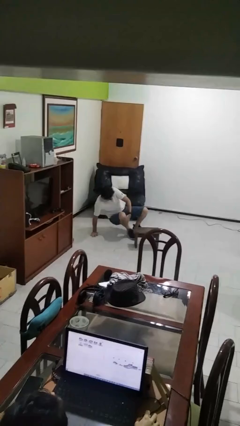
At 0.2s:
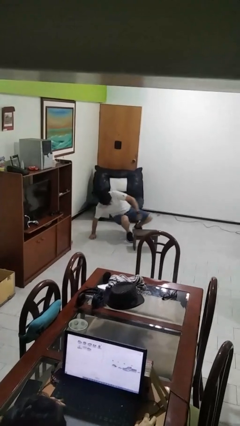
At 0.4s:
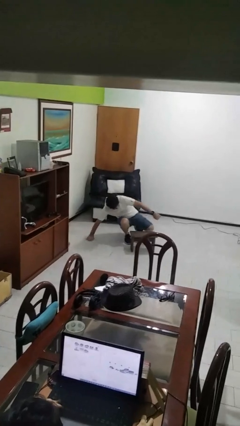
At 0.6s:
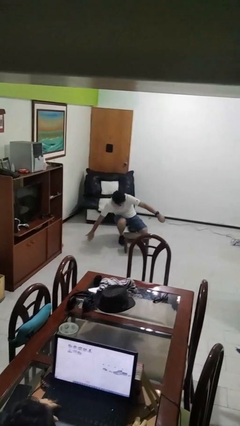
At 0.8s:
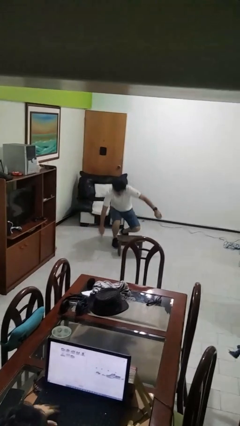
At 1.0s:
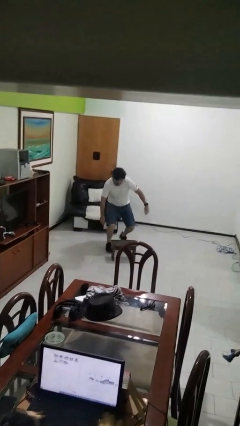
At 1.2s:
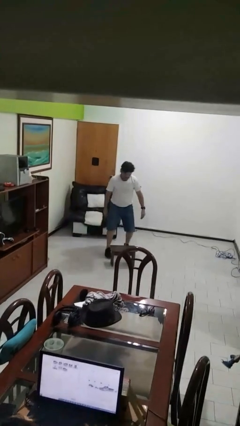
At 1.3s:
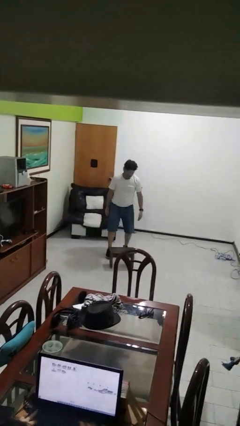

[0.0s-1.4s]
person stands up from floor

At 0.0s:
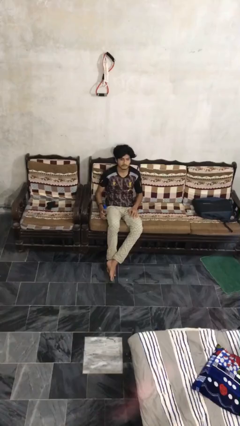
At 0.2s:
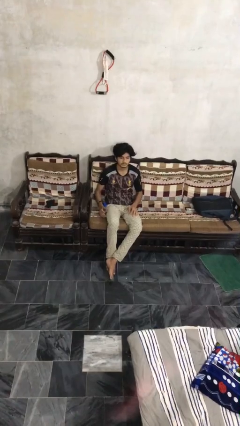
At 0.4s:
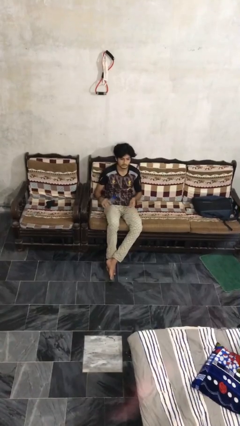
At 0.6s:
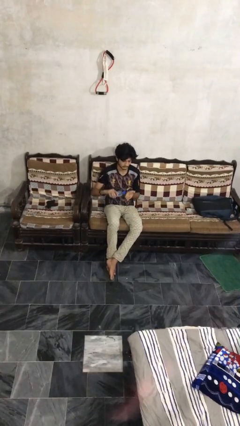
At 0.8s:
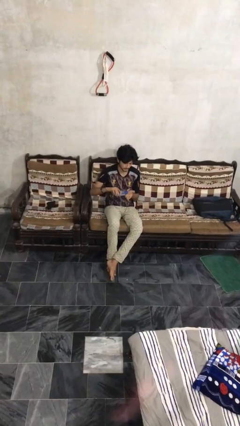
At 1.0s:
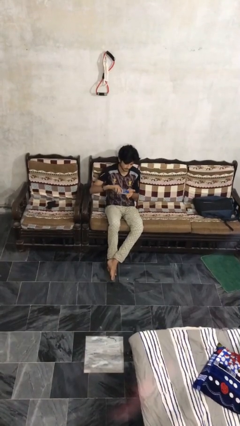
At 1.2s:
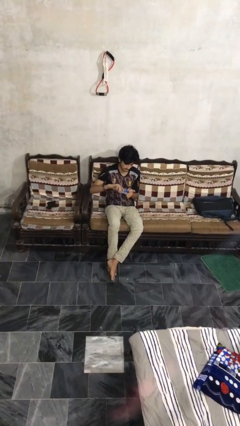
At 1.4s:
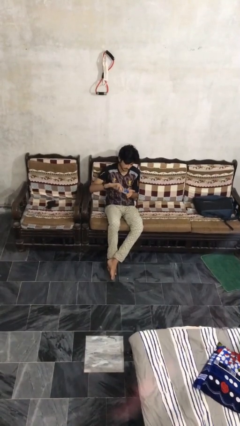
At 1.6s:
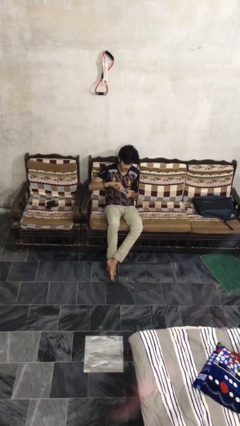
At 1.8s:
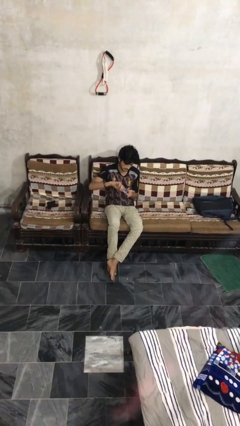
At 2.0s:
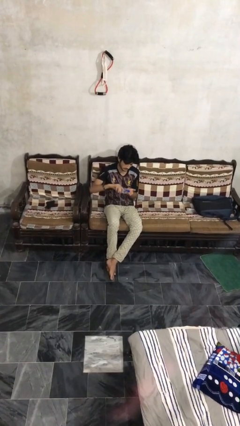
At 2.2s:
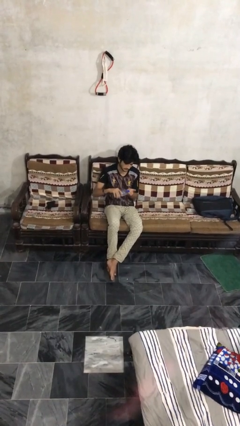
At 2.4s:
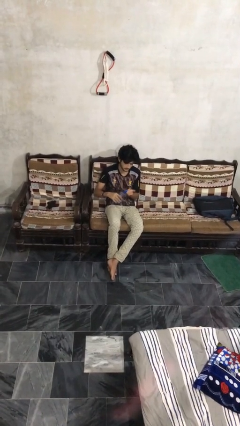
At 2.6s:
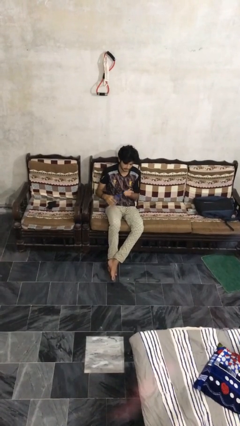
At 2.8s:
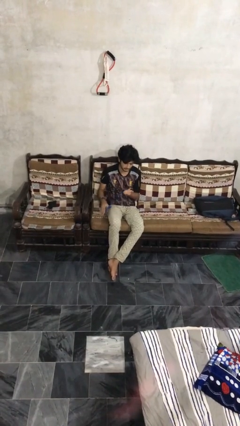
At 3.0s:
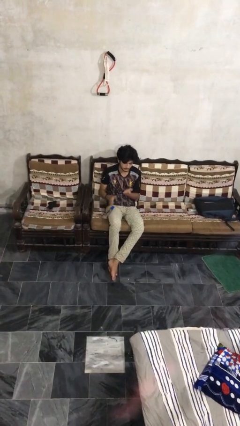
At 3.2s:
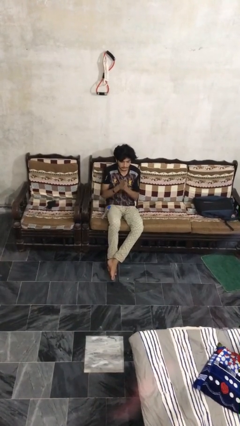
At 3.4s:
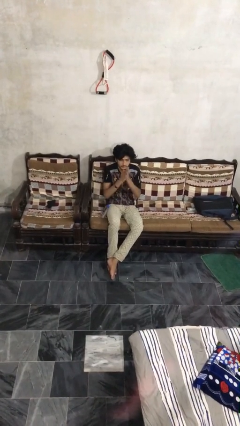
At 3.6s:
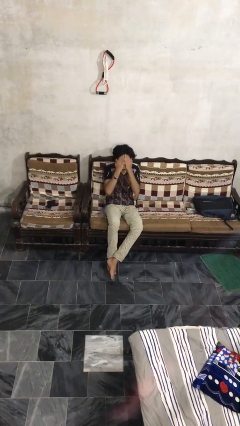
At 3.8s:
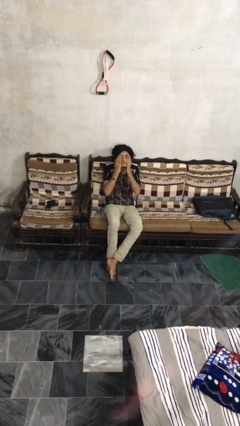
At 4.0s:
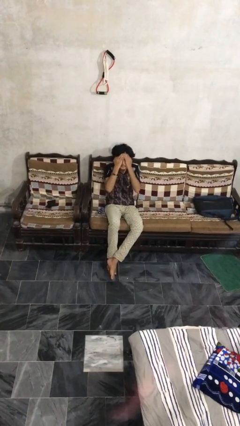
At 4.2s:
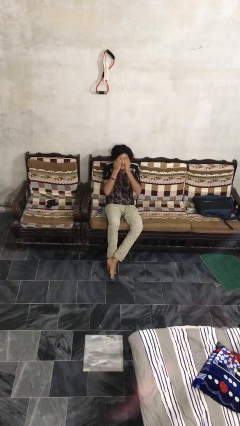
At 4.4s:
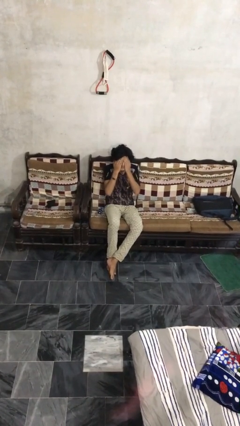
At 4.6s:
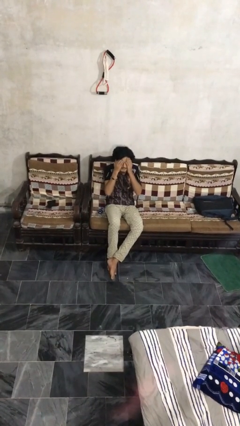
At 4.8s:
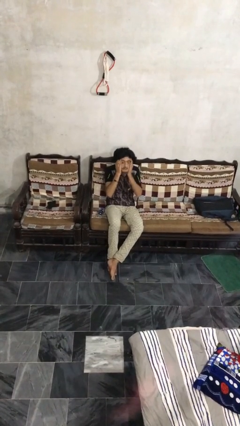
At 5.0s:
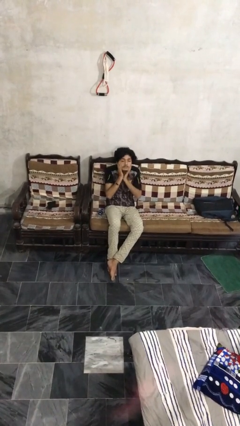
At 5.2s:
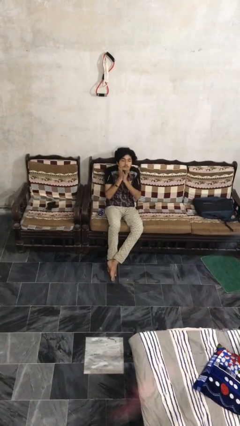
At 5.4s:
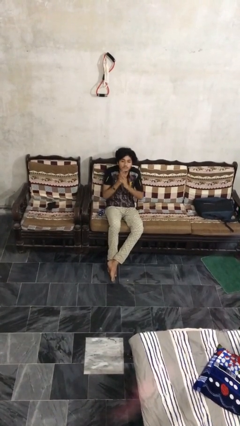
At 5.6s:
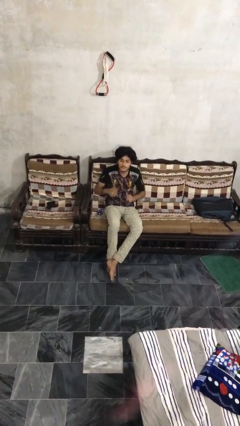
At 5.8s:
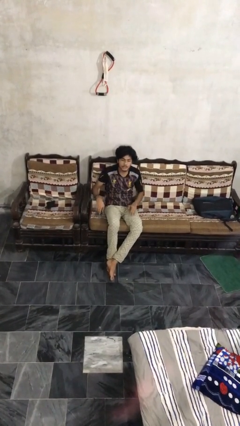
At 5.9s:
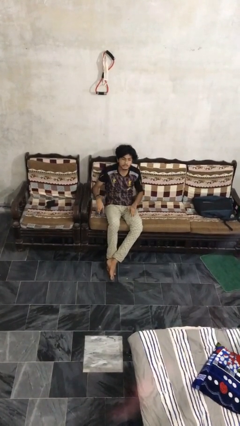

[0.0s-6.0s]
person applies facial moisturizer

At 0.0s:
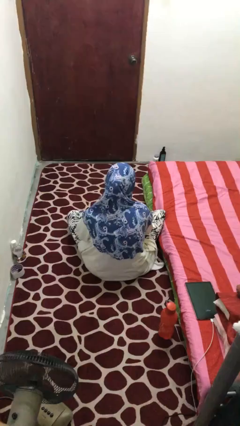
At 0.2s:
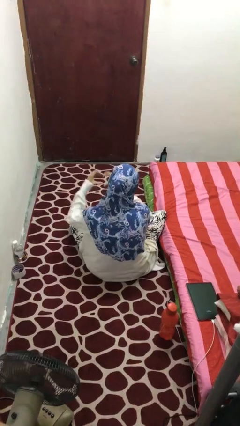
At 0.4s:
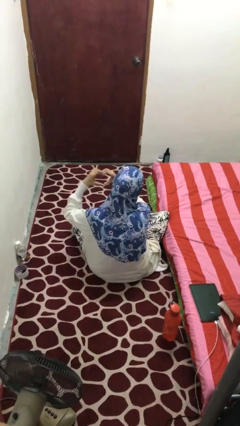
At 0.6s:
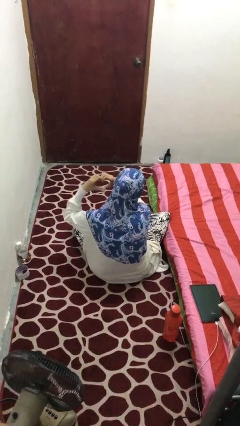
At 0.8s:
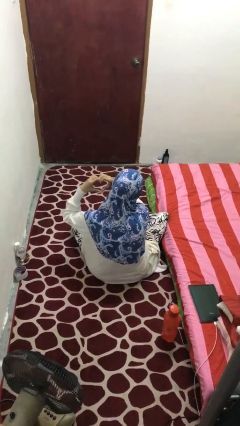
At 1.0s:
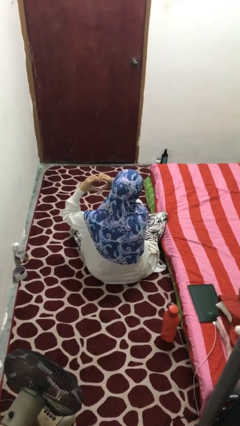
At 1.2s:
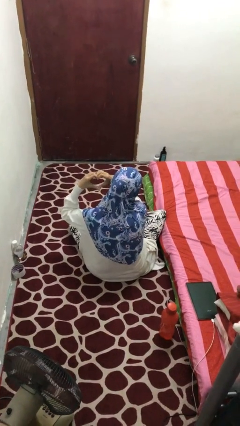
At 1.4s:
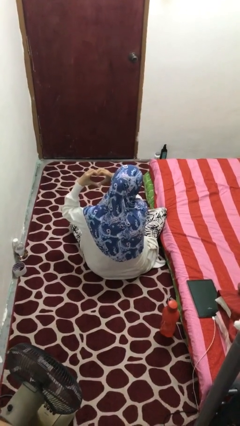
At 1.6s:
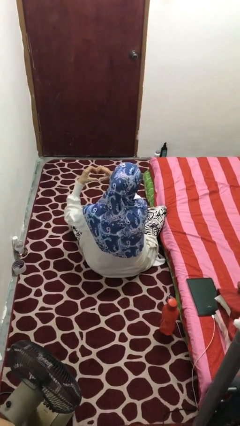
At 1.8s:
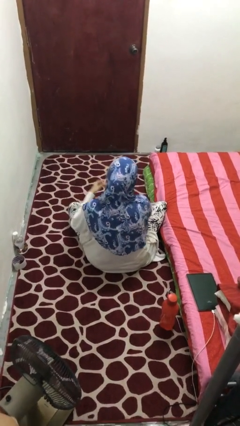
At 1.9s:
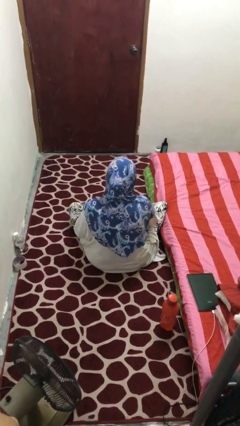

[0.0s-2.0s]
person gestures heart

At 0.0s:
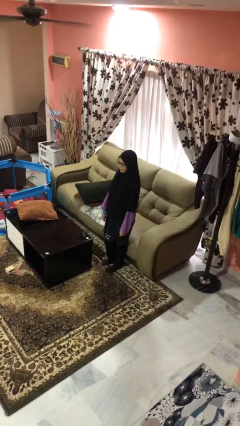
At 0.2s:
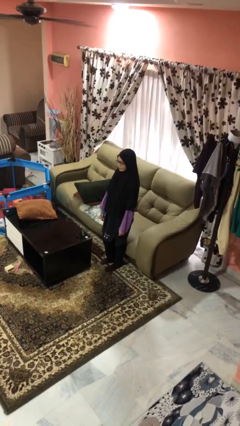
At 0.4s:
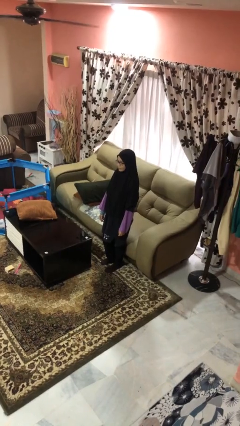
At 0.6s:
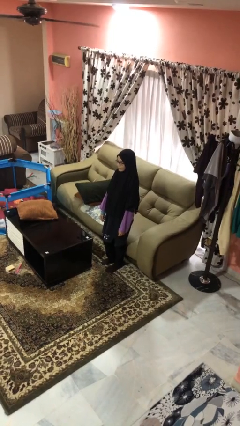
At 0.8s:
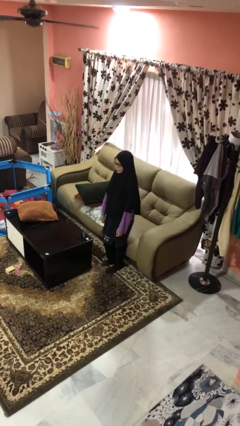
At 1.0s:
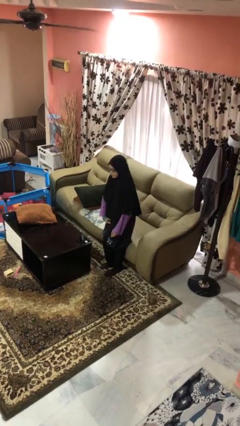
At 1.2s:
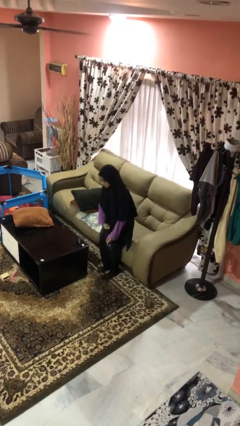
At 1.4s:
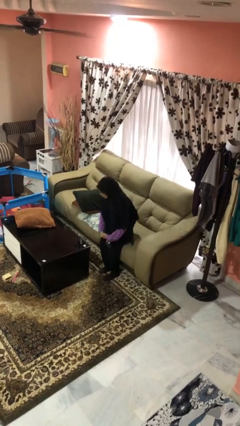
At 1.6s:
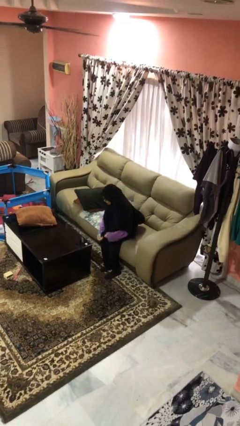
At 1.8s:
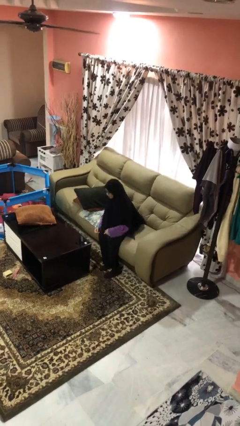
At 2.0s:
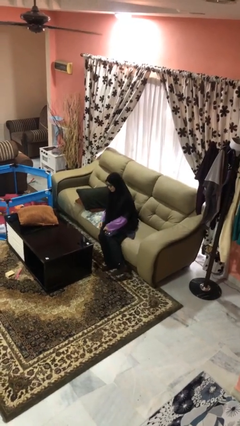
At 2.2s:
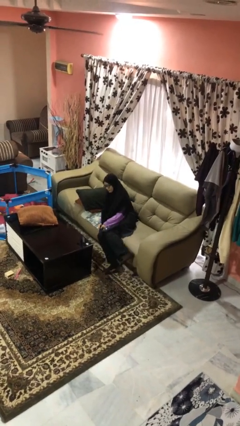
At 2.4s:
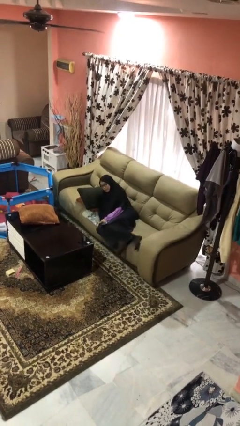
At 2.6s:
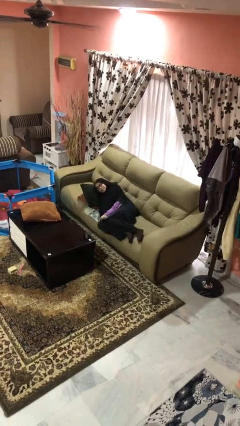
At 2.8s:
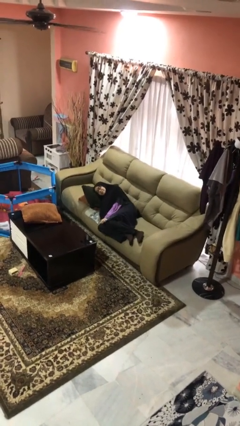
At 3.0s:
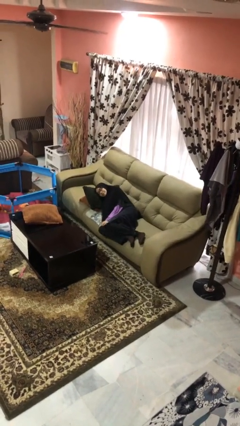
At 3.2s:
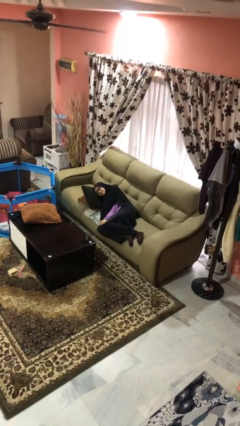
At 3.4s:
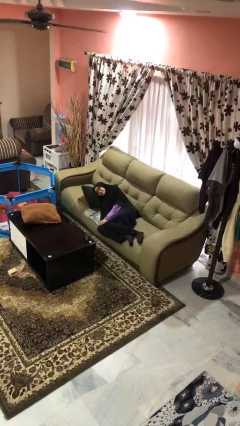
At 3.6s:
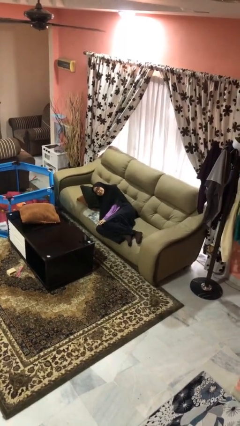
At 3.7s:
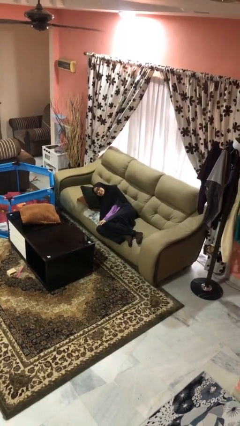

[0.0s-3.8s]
person lies down on couch

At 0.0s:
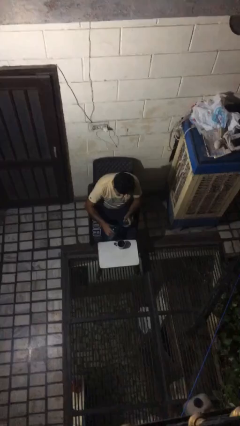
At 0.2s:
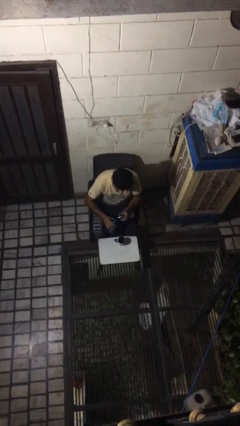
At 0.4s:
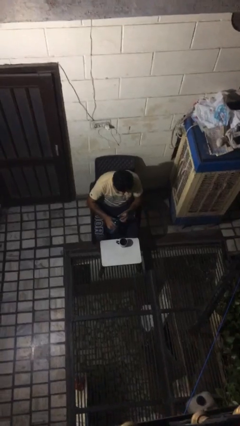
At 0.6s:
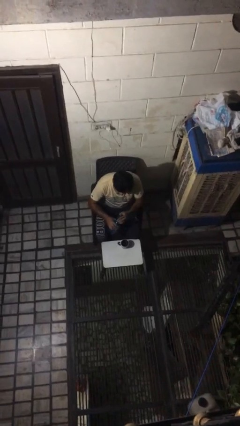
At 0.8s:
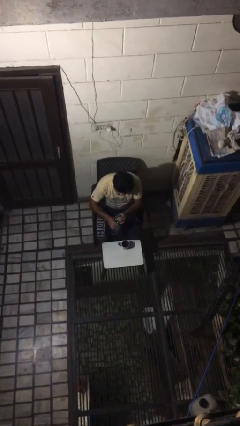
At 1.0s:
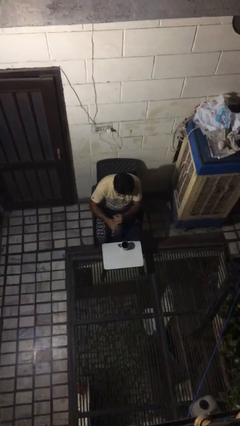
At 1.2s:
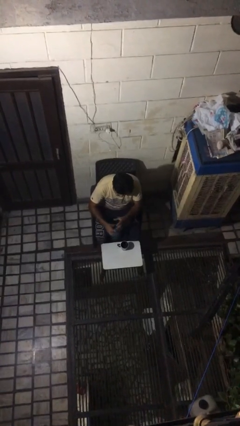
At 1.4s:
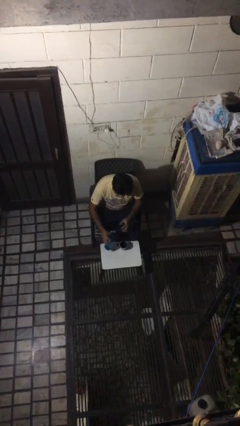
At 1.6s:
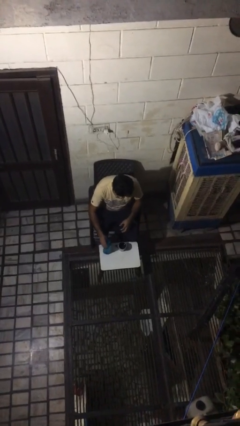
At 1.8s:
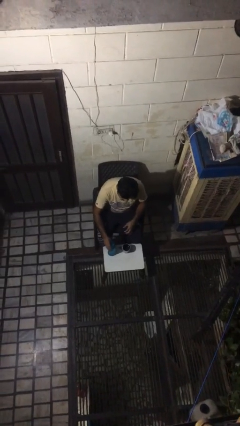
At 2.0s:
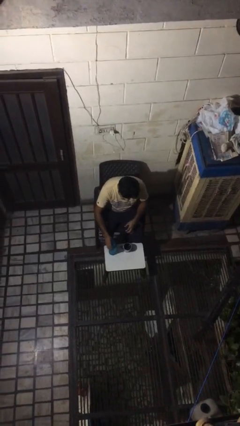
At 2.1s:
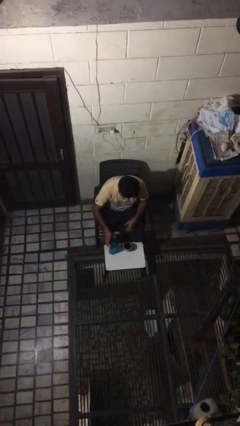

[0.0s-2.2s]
person screws lid to bottle

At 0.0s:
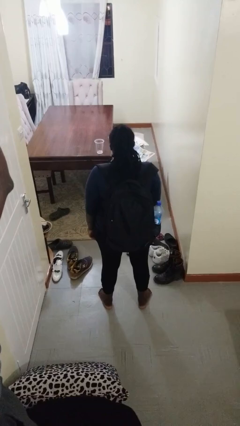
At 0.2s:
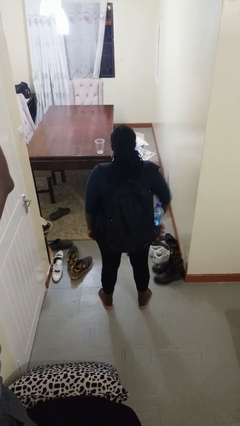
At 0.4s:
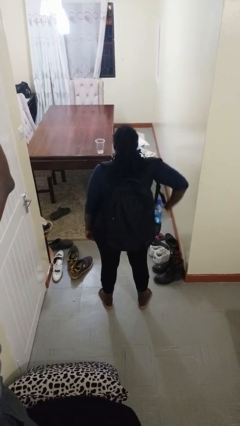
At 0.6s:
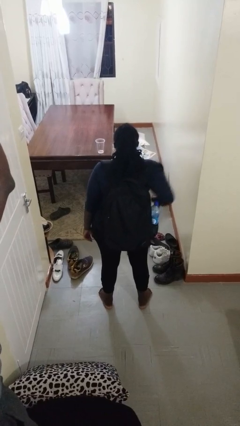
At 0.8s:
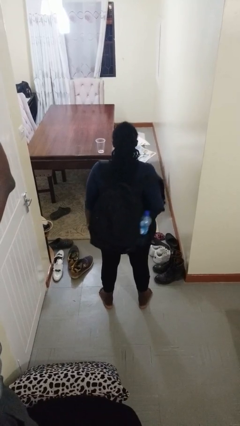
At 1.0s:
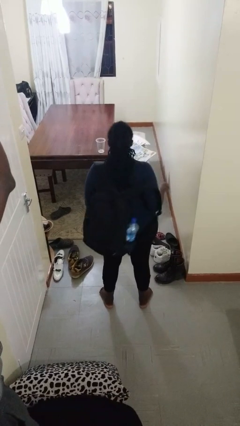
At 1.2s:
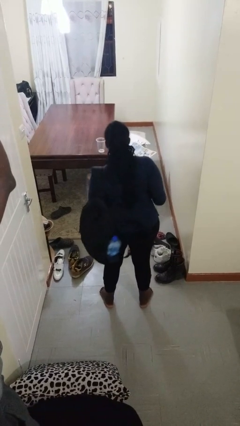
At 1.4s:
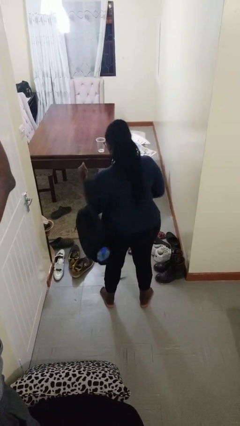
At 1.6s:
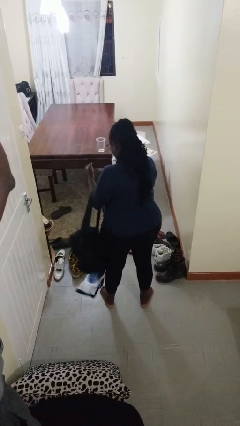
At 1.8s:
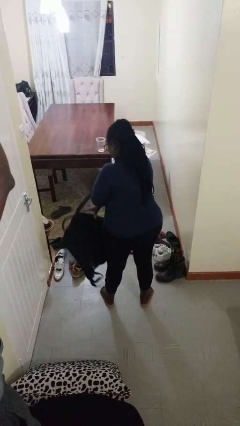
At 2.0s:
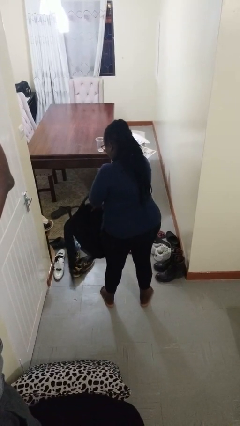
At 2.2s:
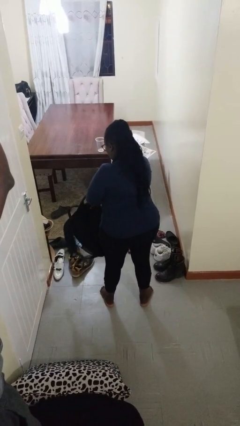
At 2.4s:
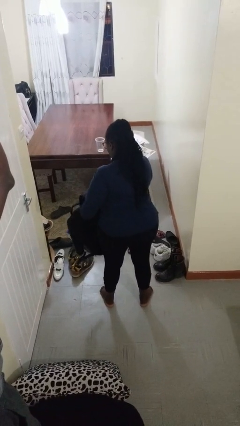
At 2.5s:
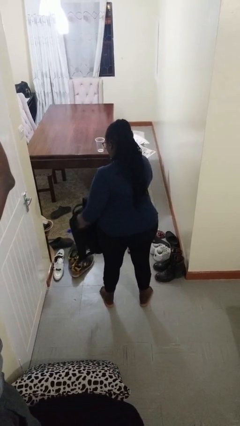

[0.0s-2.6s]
person takes off backpack
